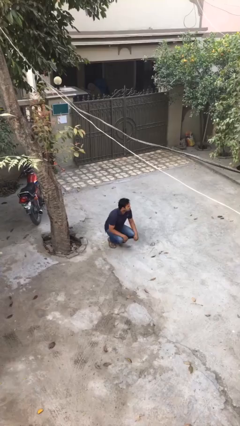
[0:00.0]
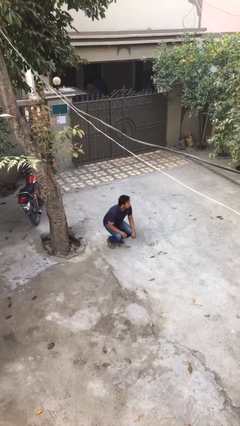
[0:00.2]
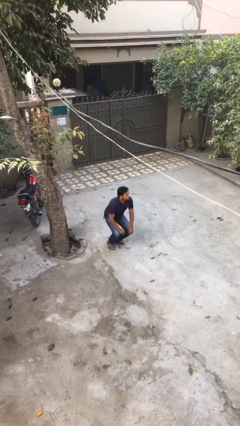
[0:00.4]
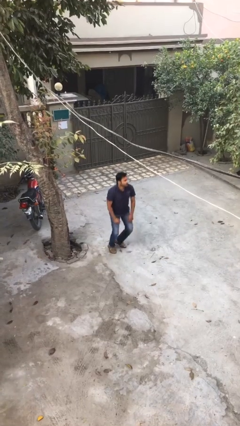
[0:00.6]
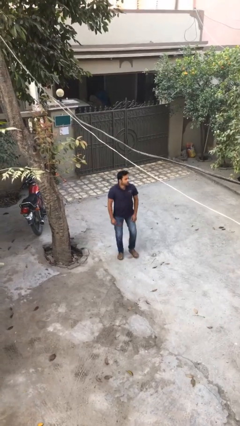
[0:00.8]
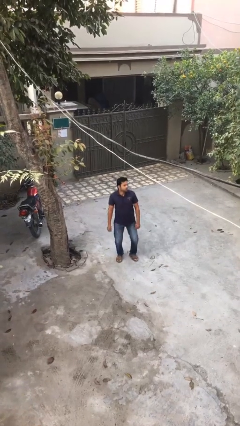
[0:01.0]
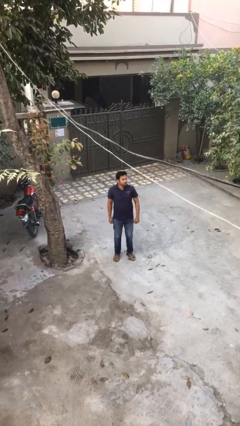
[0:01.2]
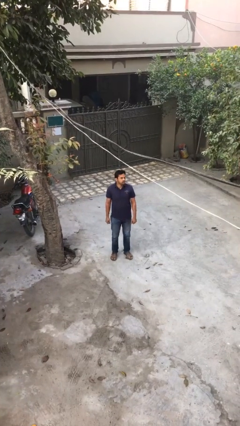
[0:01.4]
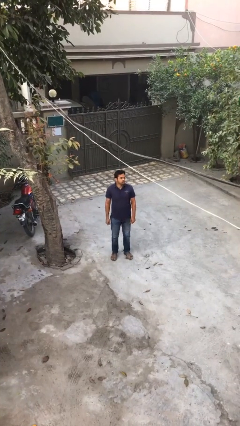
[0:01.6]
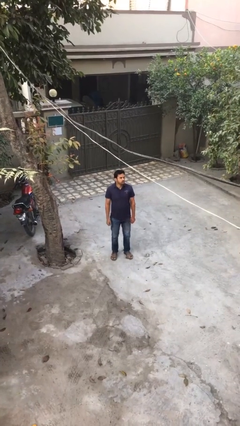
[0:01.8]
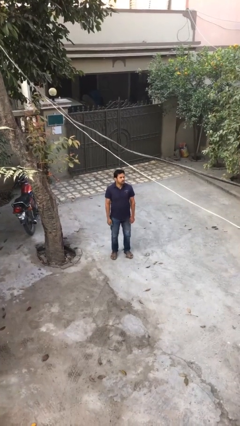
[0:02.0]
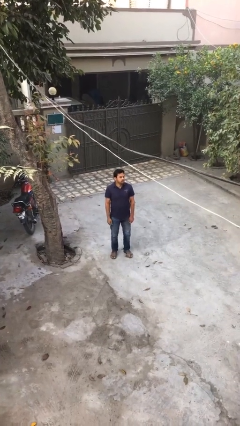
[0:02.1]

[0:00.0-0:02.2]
person stands up

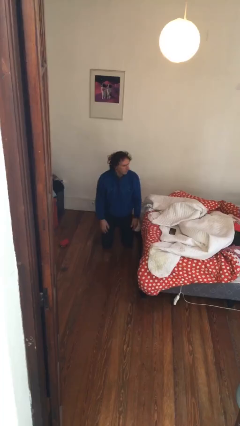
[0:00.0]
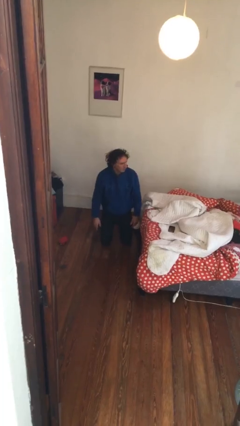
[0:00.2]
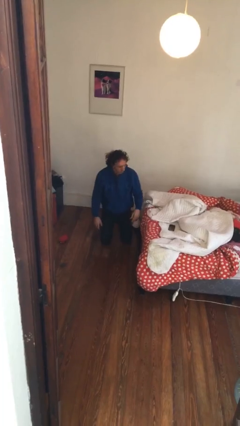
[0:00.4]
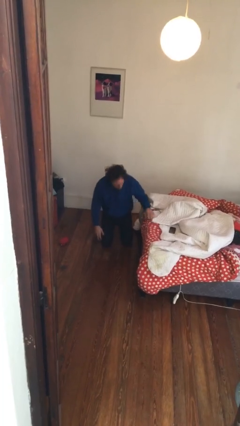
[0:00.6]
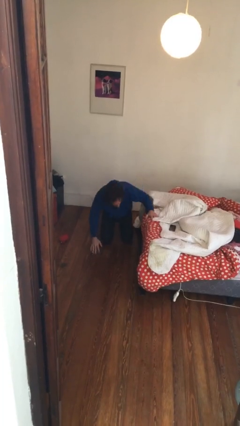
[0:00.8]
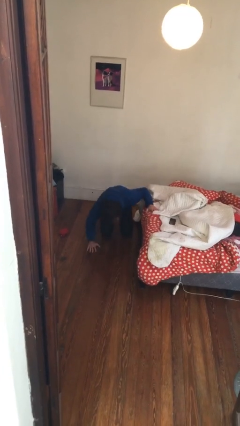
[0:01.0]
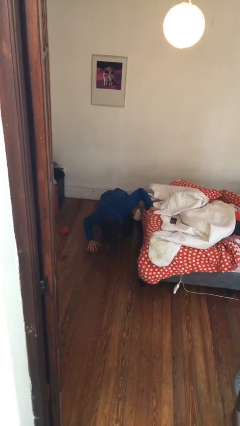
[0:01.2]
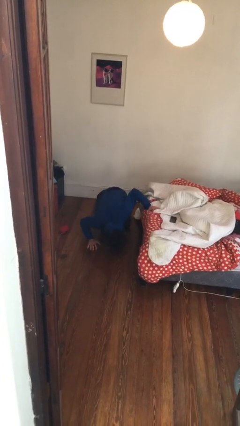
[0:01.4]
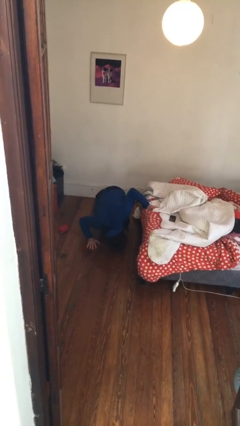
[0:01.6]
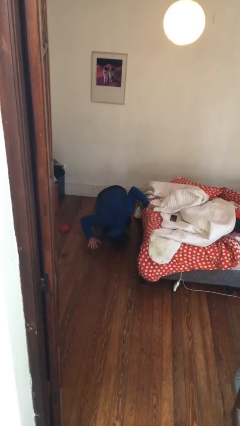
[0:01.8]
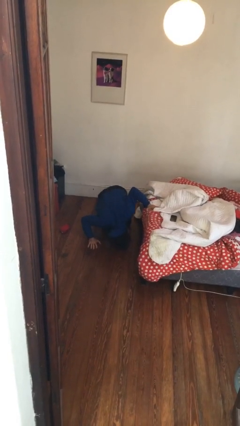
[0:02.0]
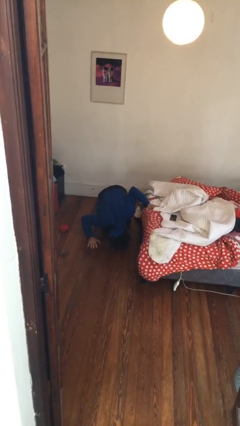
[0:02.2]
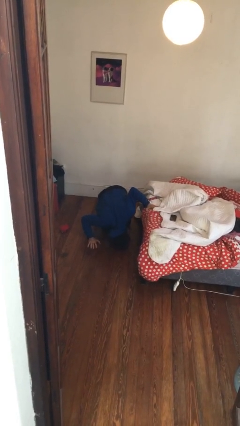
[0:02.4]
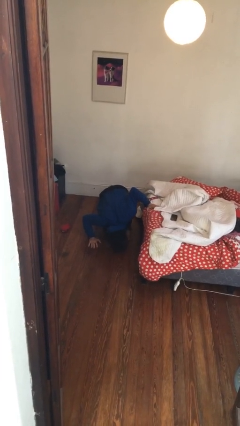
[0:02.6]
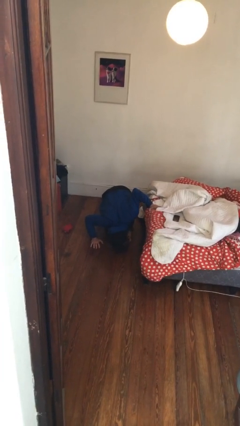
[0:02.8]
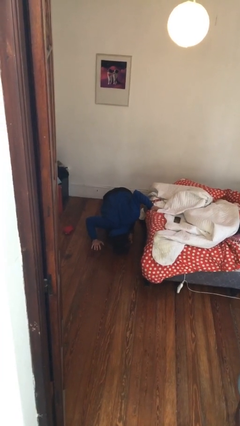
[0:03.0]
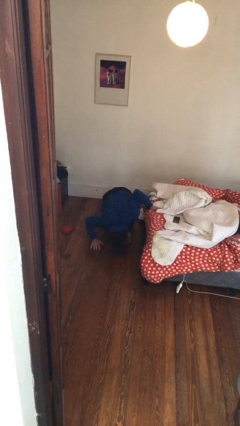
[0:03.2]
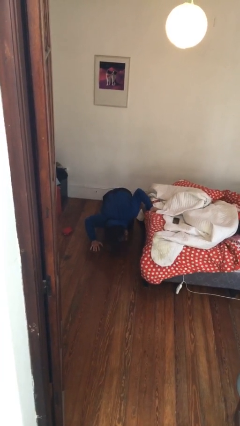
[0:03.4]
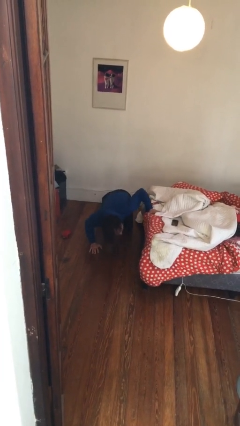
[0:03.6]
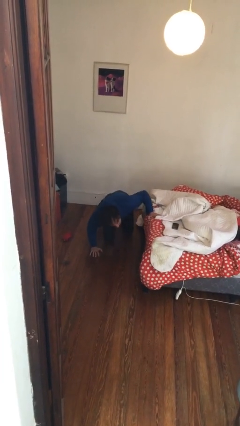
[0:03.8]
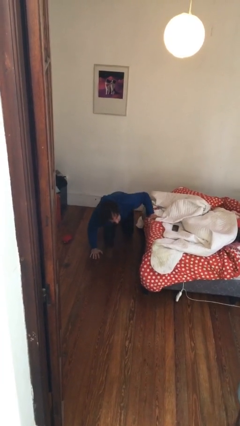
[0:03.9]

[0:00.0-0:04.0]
person searches under bed

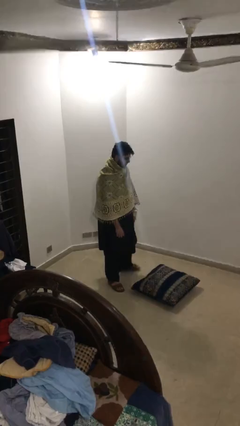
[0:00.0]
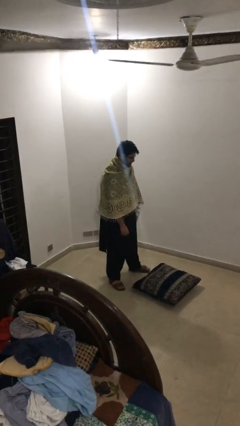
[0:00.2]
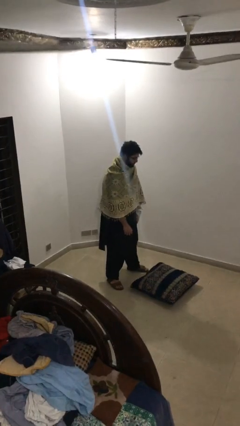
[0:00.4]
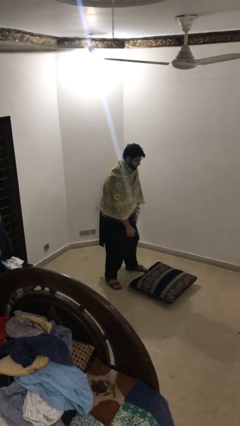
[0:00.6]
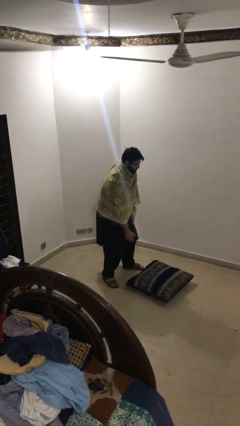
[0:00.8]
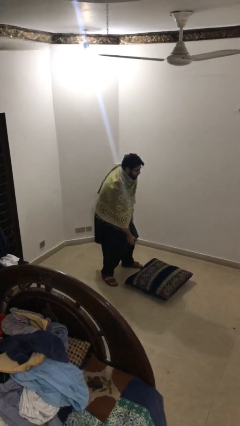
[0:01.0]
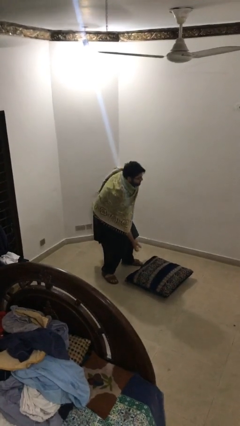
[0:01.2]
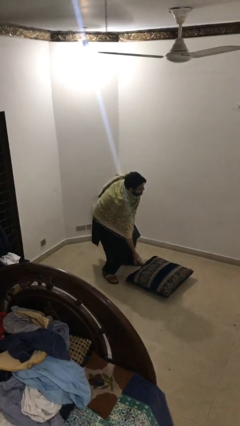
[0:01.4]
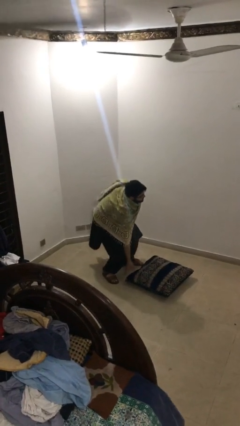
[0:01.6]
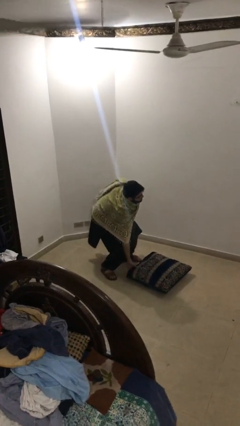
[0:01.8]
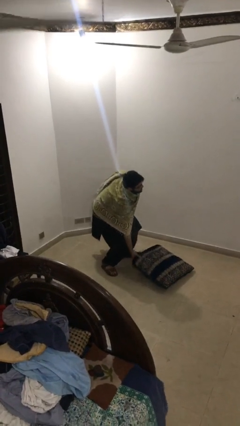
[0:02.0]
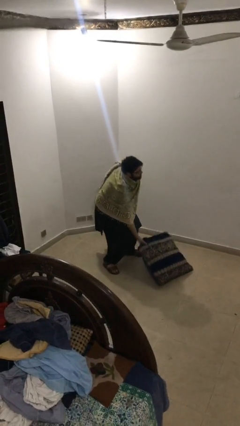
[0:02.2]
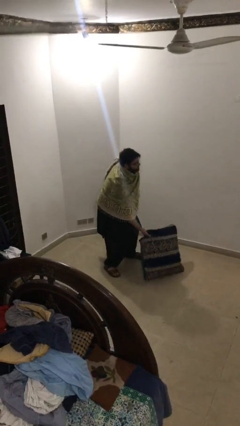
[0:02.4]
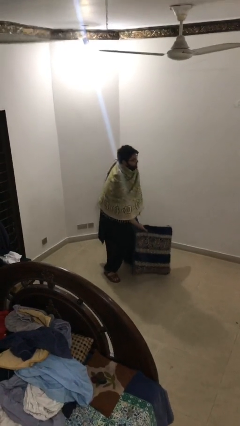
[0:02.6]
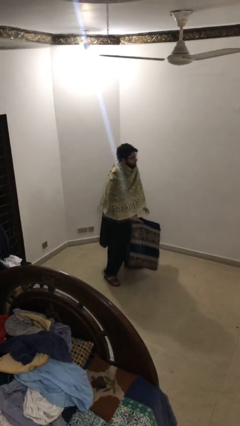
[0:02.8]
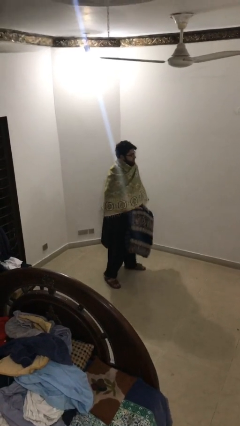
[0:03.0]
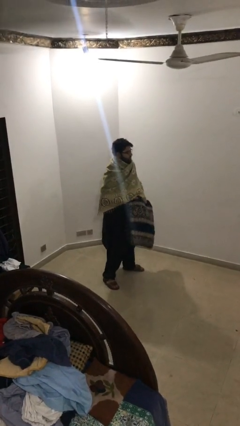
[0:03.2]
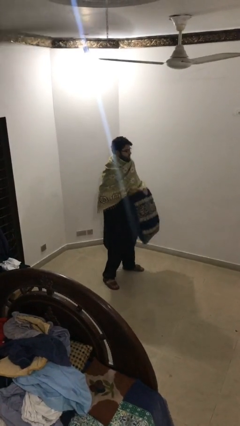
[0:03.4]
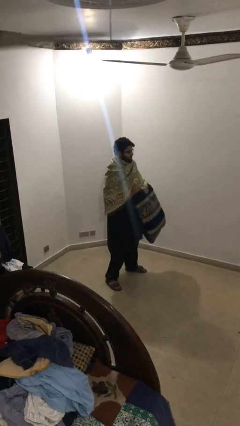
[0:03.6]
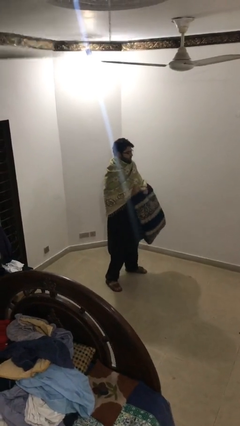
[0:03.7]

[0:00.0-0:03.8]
person picks up object from floor

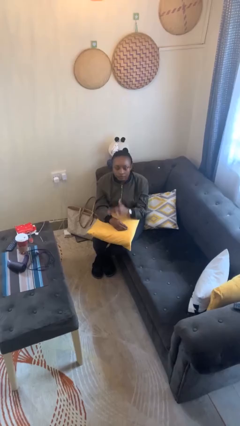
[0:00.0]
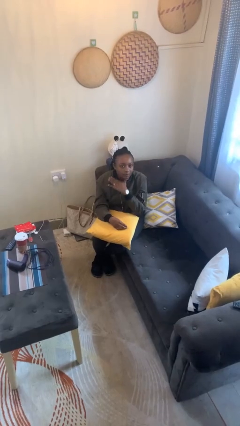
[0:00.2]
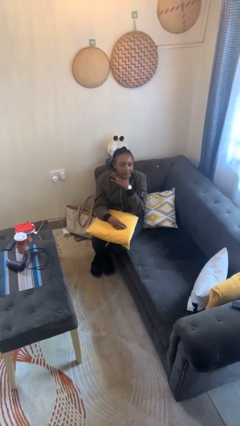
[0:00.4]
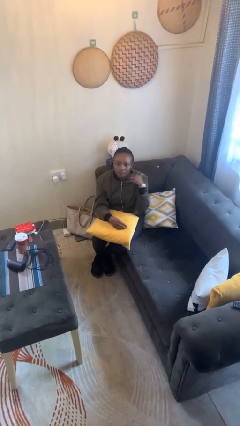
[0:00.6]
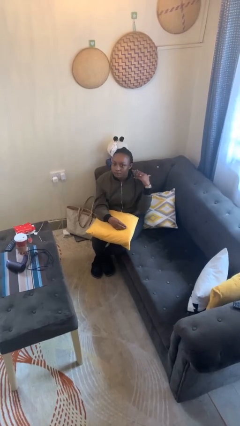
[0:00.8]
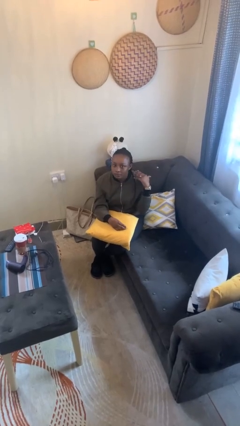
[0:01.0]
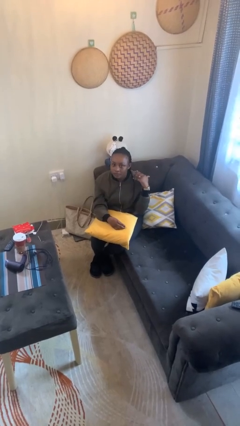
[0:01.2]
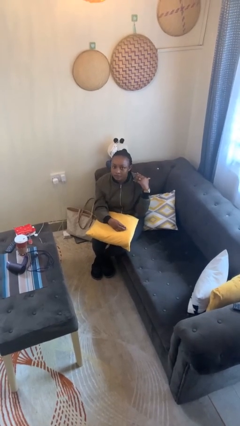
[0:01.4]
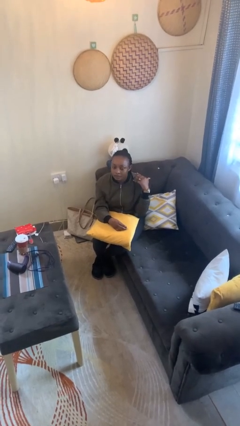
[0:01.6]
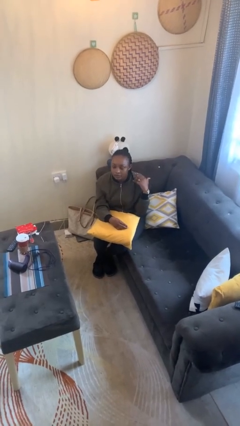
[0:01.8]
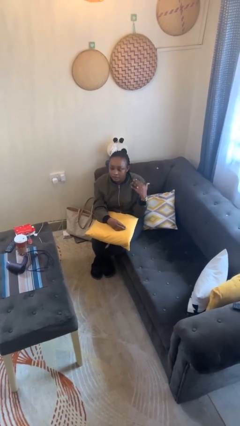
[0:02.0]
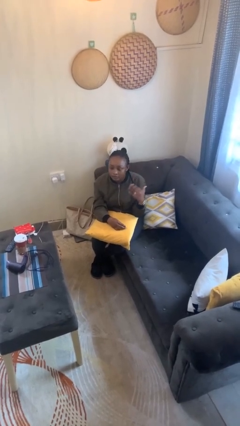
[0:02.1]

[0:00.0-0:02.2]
person gestures cut

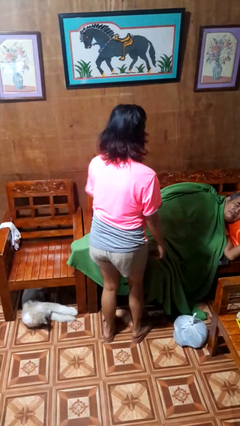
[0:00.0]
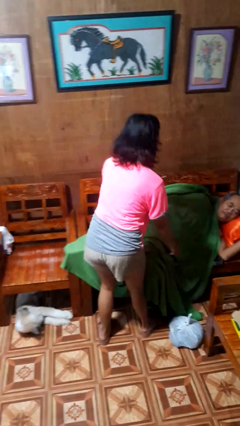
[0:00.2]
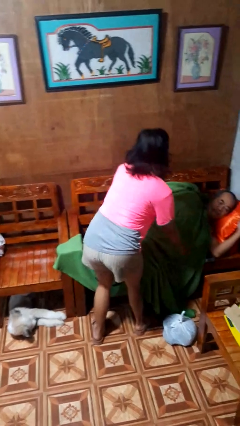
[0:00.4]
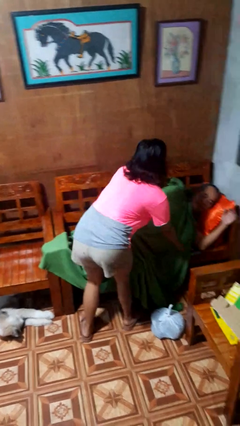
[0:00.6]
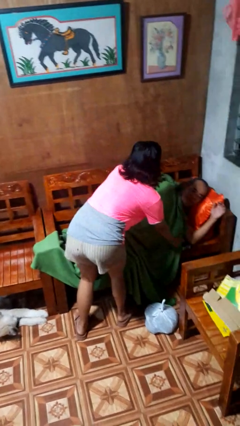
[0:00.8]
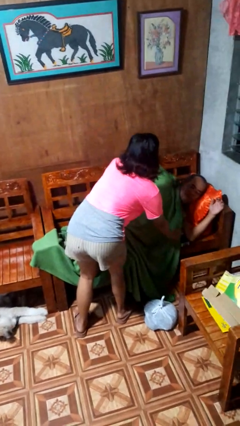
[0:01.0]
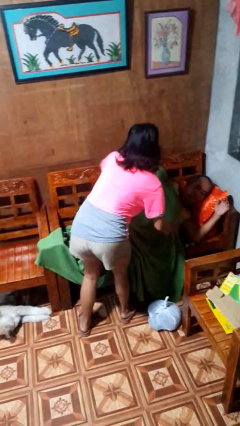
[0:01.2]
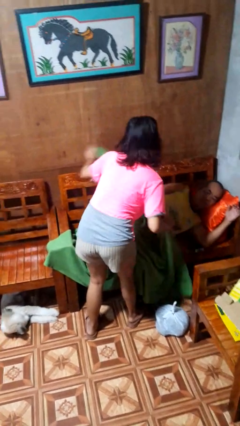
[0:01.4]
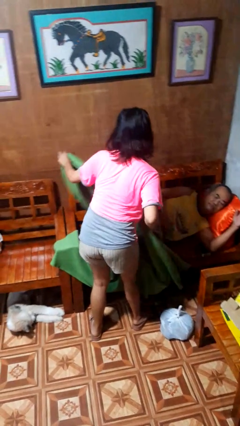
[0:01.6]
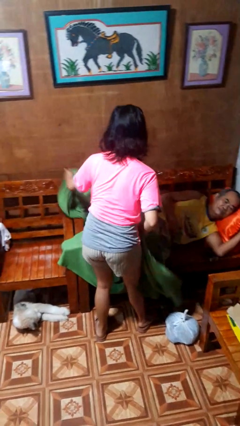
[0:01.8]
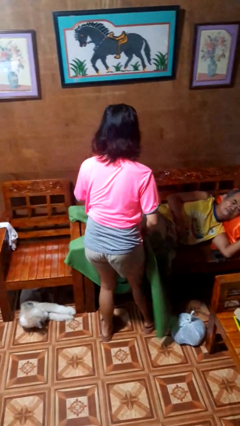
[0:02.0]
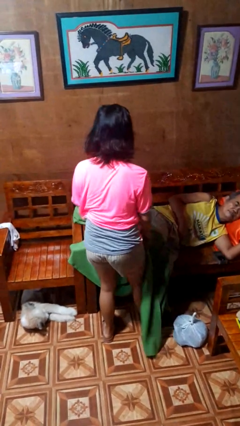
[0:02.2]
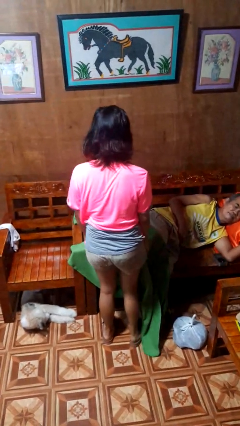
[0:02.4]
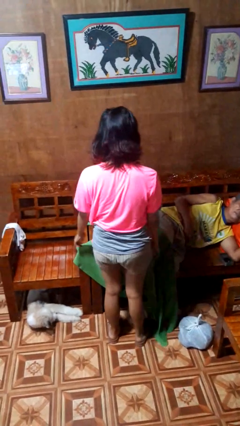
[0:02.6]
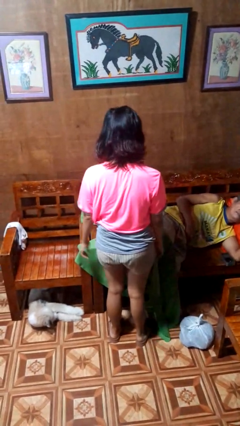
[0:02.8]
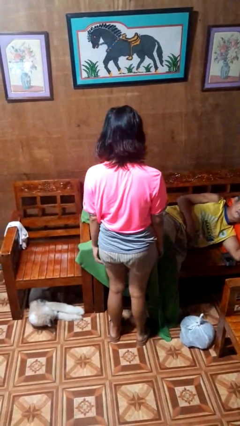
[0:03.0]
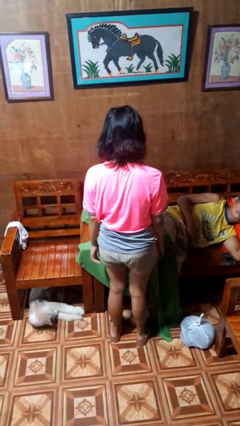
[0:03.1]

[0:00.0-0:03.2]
person uncovers friend with blanket

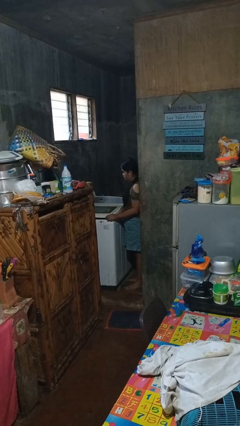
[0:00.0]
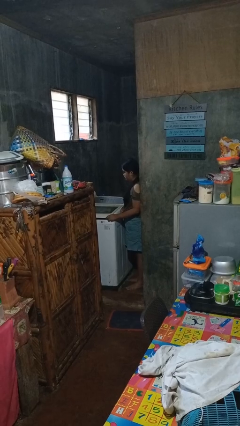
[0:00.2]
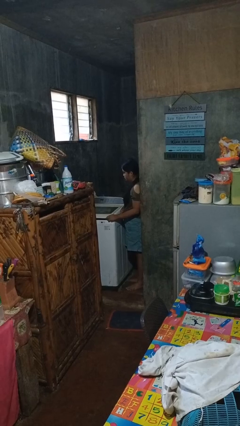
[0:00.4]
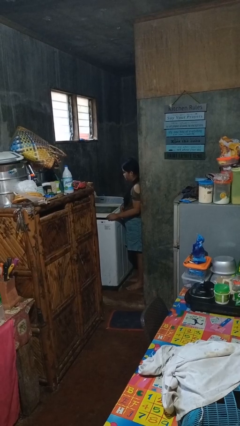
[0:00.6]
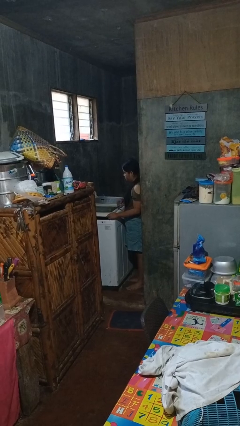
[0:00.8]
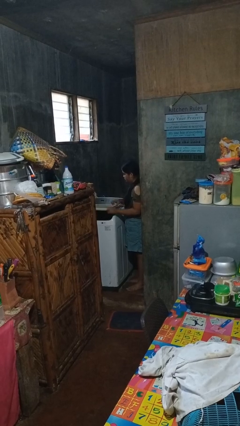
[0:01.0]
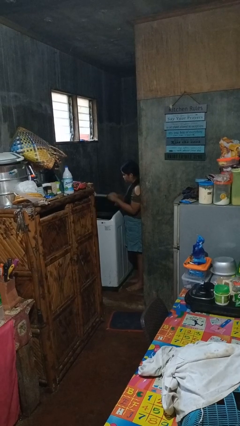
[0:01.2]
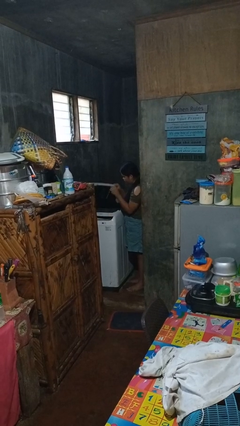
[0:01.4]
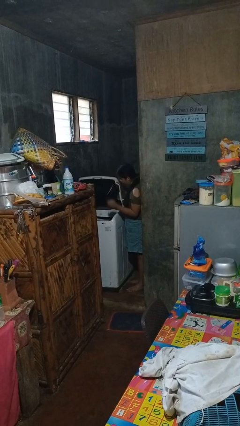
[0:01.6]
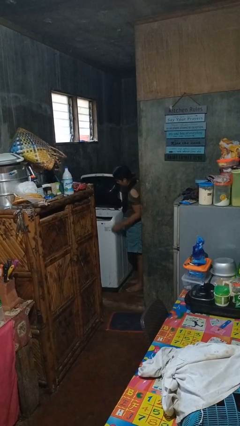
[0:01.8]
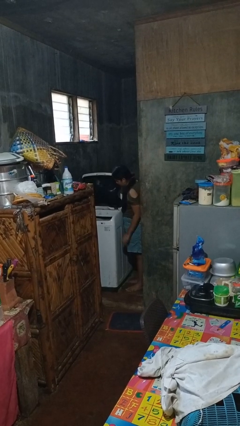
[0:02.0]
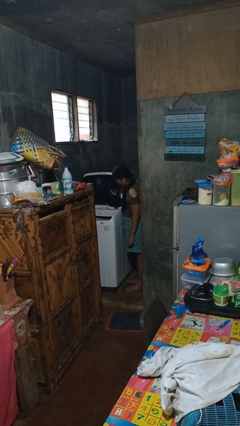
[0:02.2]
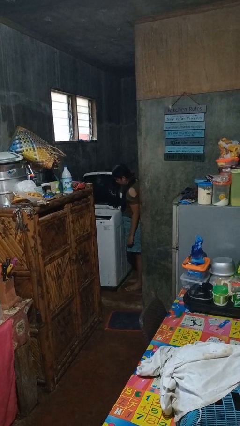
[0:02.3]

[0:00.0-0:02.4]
person opens clothes washer
